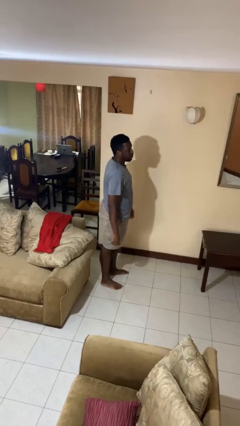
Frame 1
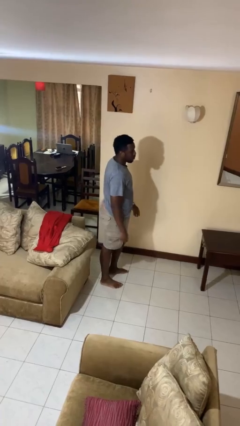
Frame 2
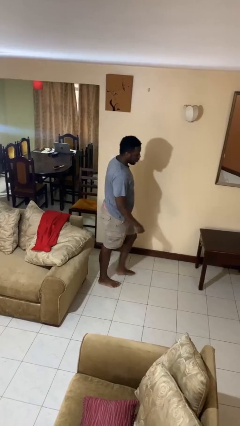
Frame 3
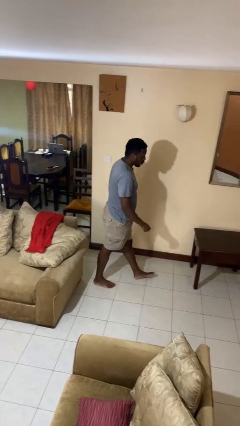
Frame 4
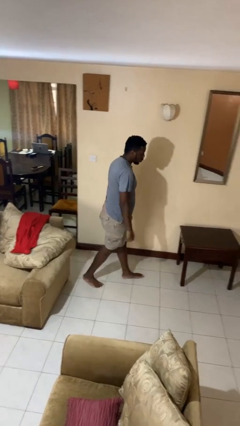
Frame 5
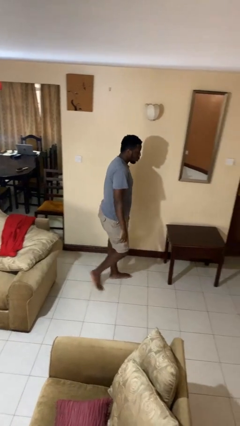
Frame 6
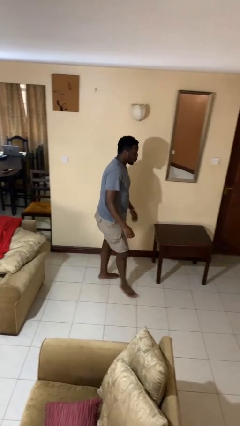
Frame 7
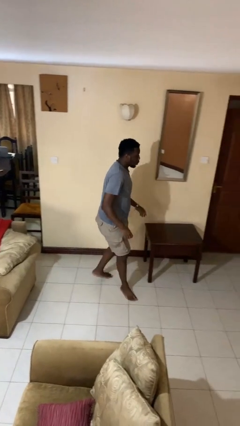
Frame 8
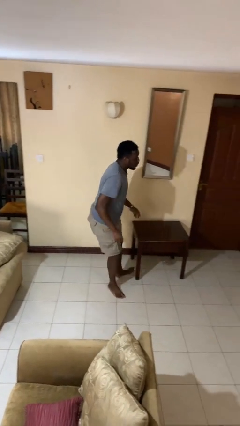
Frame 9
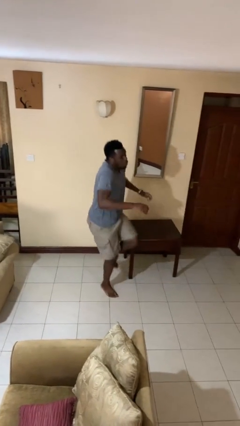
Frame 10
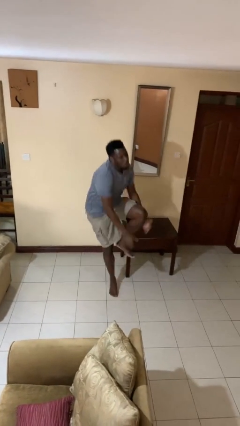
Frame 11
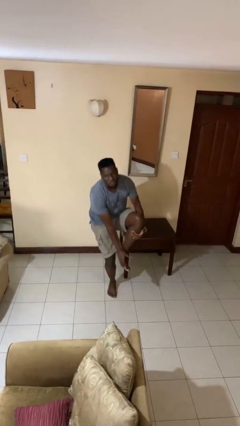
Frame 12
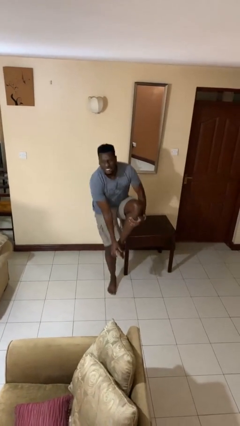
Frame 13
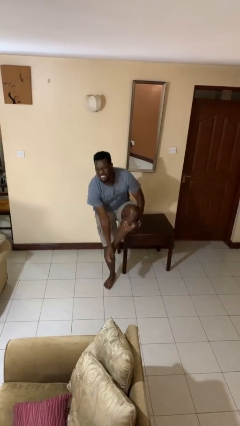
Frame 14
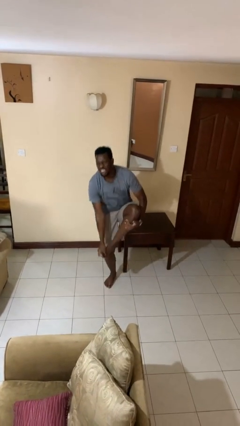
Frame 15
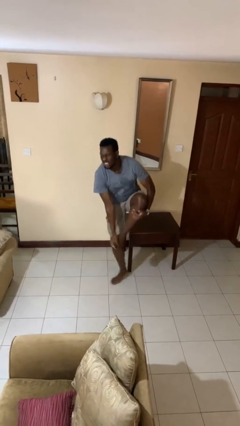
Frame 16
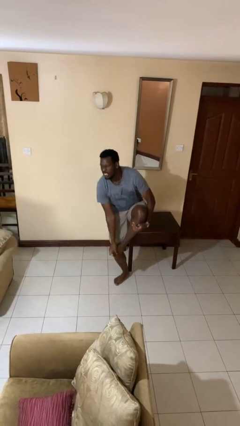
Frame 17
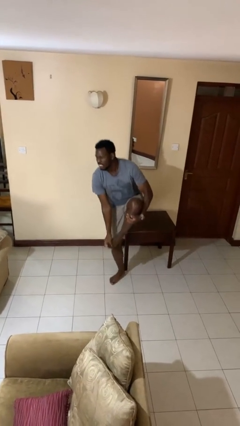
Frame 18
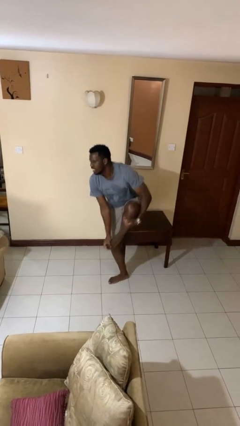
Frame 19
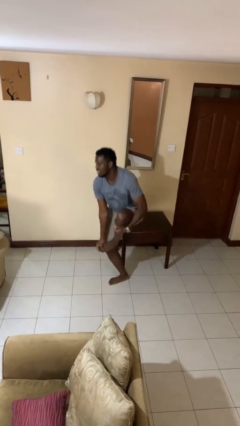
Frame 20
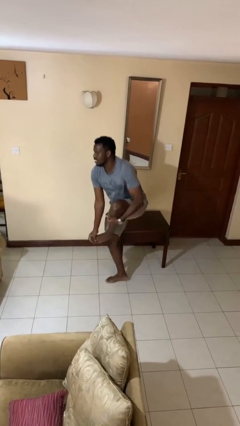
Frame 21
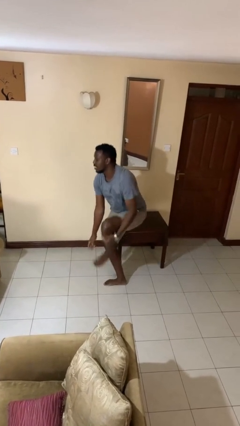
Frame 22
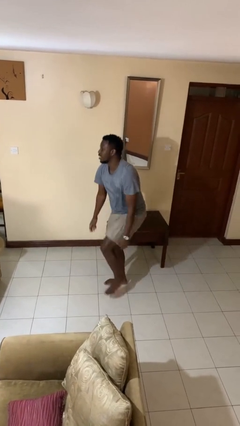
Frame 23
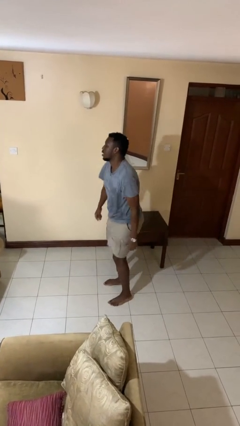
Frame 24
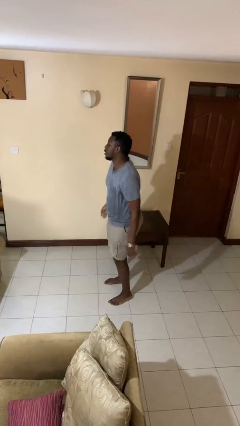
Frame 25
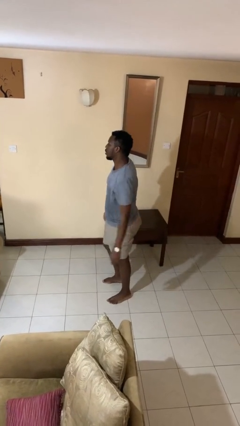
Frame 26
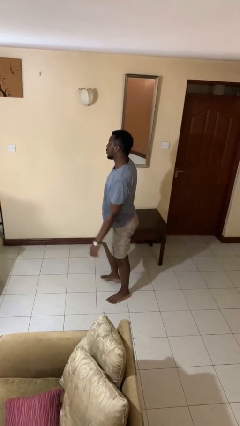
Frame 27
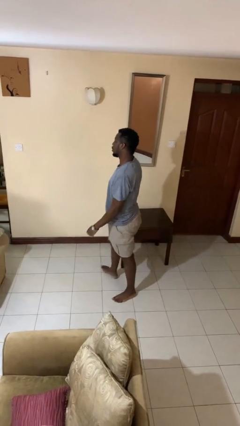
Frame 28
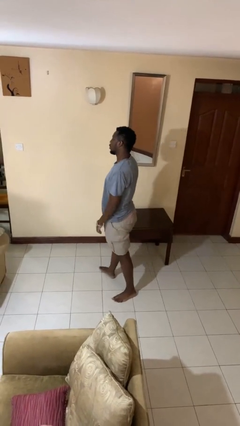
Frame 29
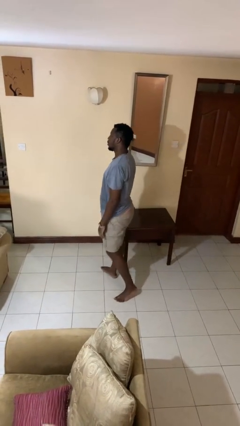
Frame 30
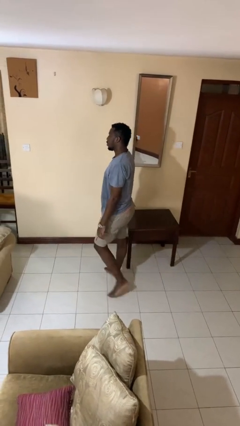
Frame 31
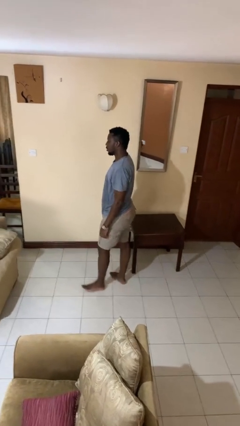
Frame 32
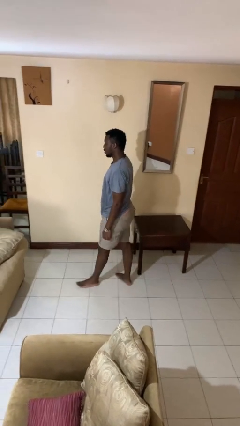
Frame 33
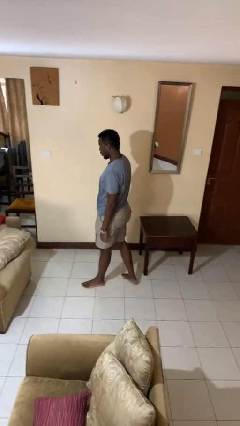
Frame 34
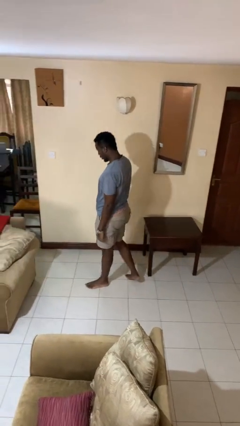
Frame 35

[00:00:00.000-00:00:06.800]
person stubs toe

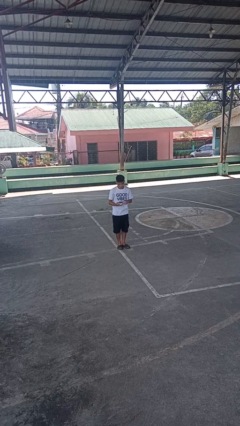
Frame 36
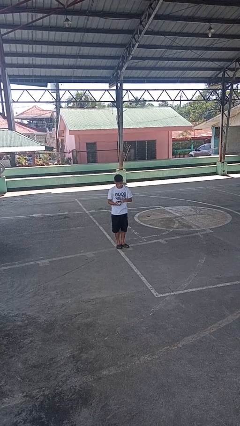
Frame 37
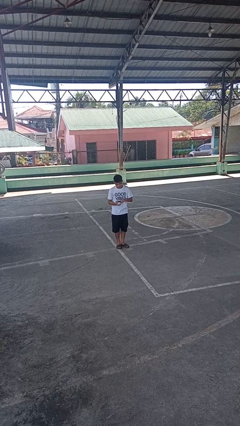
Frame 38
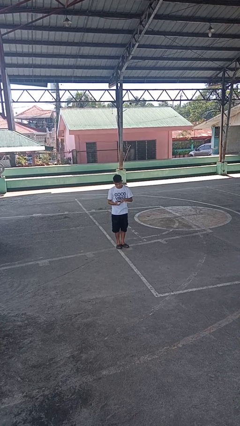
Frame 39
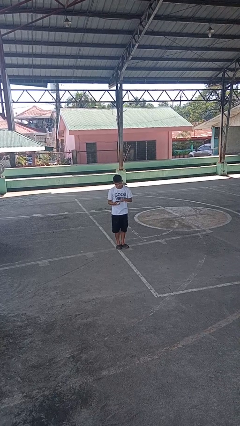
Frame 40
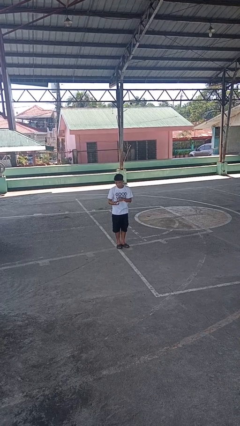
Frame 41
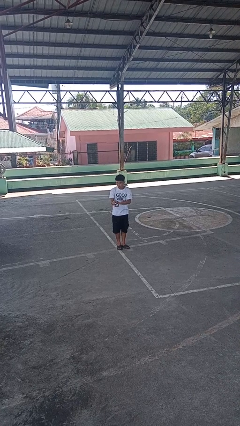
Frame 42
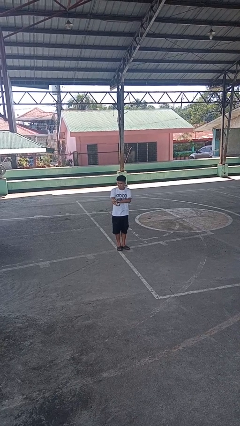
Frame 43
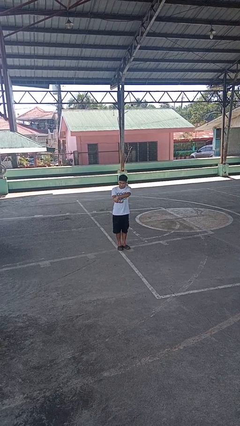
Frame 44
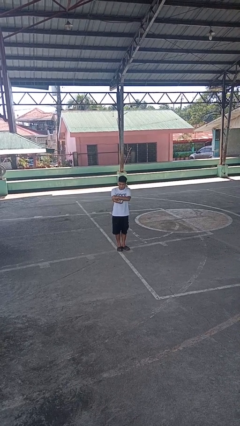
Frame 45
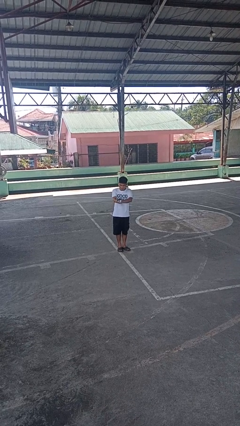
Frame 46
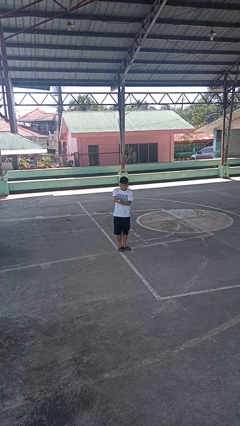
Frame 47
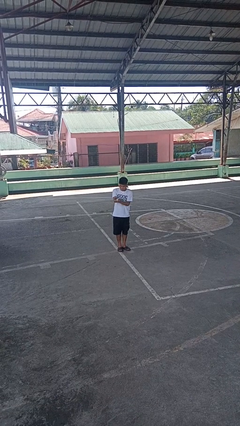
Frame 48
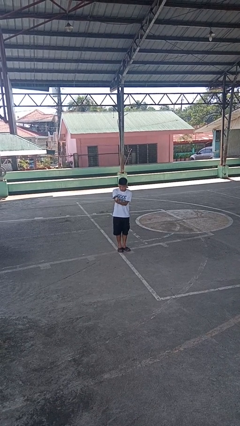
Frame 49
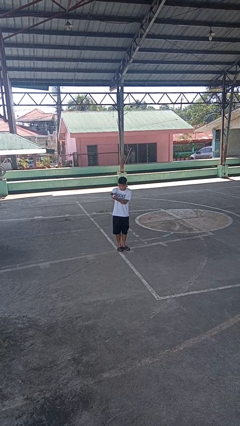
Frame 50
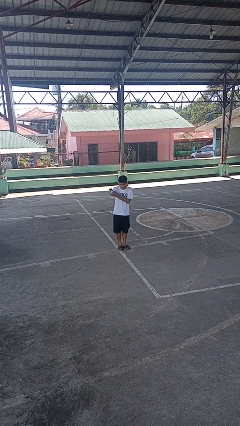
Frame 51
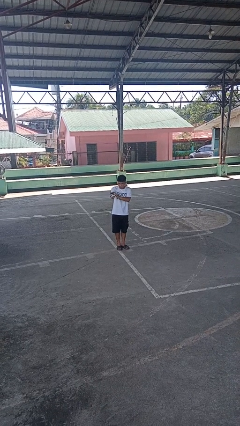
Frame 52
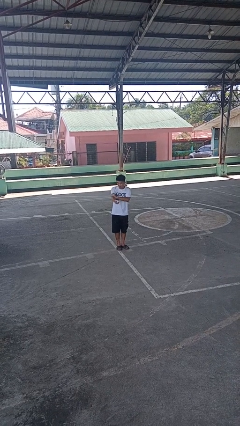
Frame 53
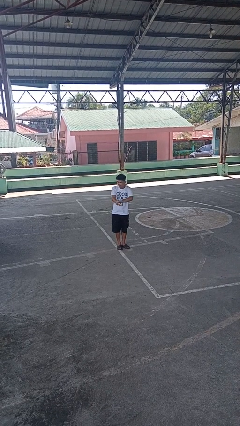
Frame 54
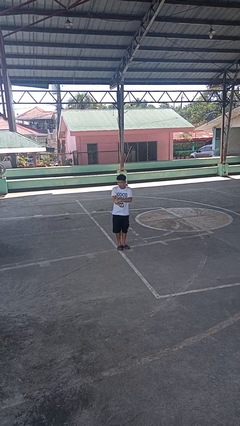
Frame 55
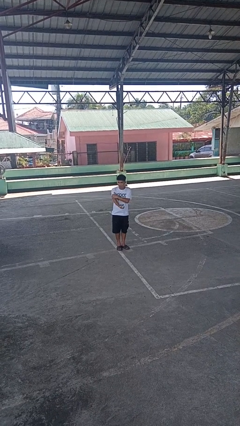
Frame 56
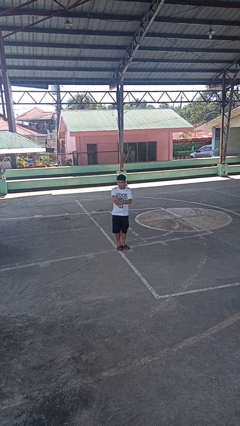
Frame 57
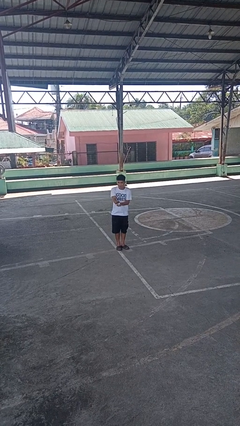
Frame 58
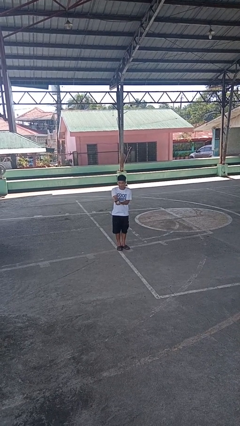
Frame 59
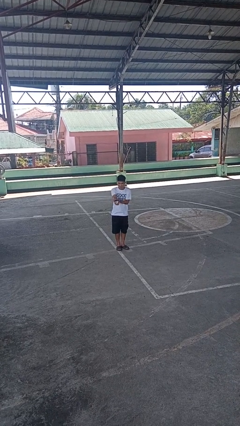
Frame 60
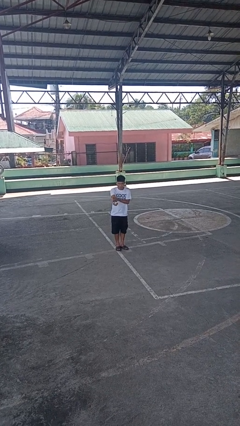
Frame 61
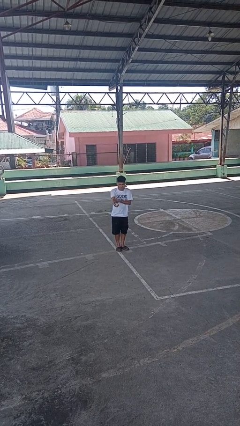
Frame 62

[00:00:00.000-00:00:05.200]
person applies sunscreen

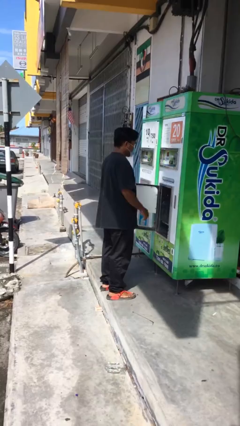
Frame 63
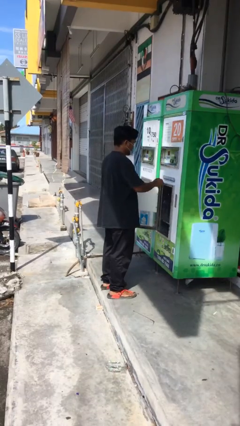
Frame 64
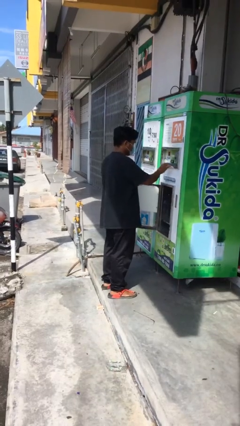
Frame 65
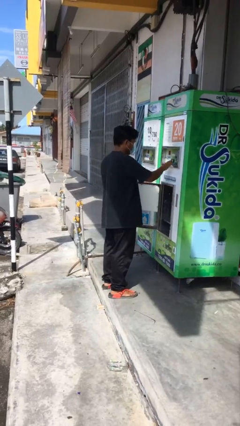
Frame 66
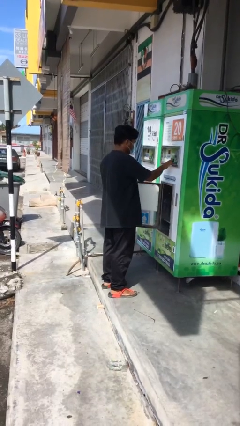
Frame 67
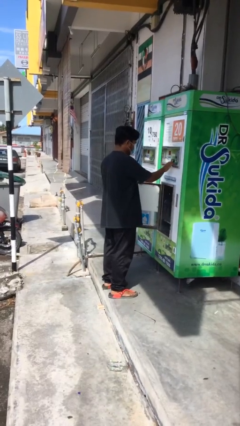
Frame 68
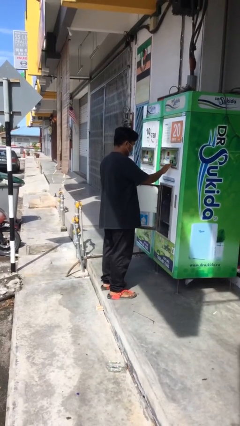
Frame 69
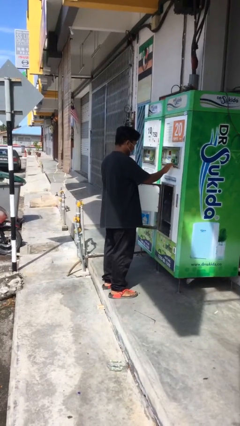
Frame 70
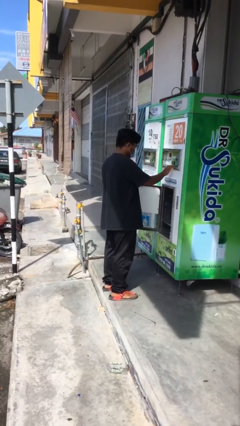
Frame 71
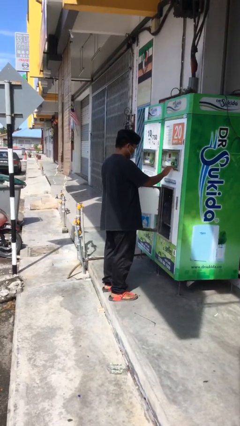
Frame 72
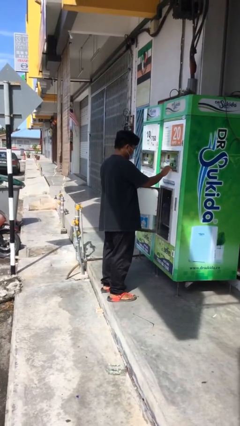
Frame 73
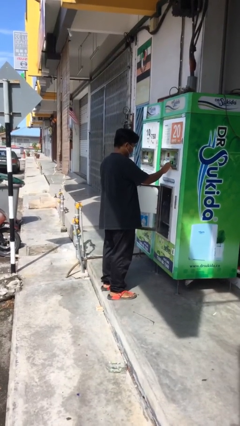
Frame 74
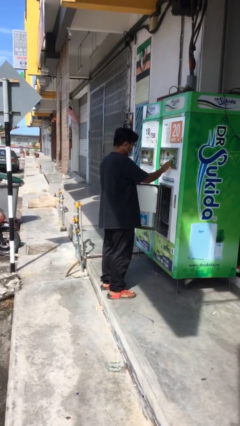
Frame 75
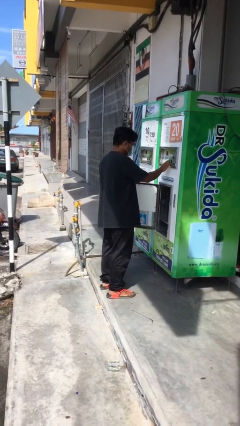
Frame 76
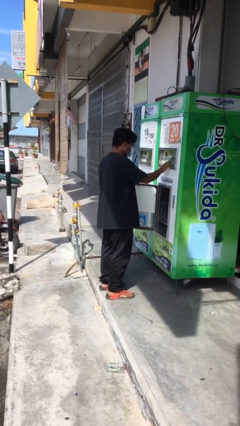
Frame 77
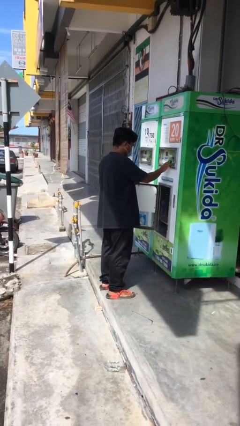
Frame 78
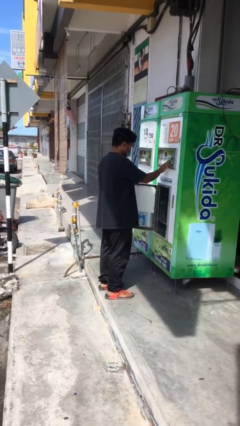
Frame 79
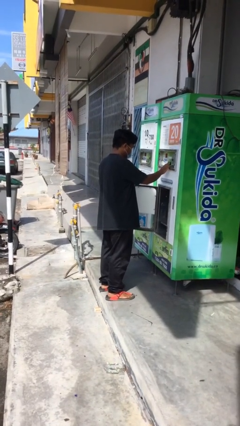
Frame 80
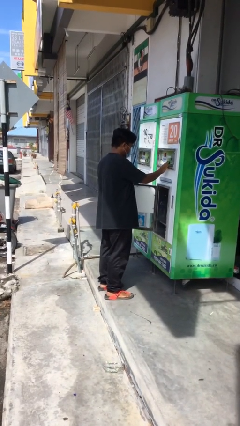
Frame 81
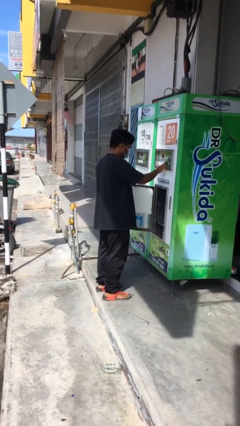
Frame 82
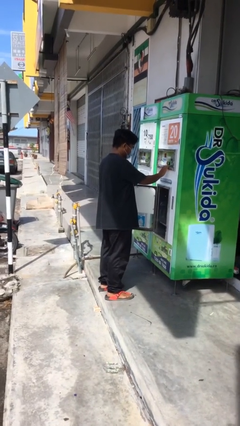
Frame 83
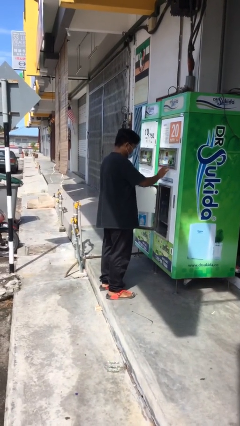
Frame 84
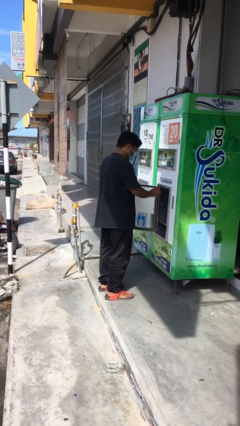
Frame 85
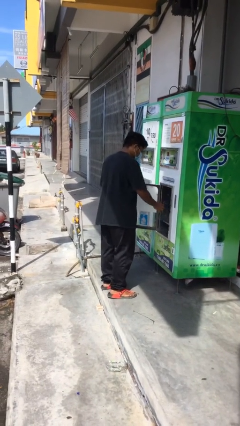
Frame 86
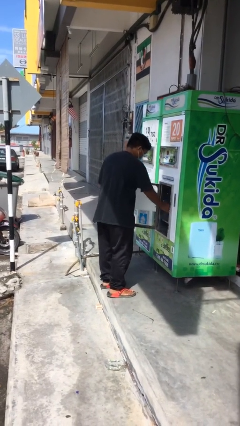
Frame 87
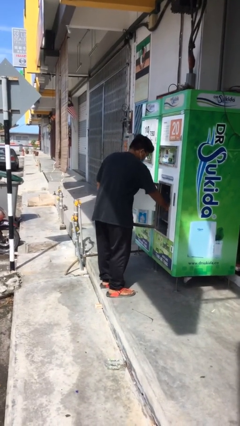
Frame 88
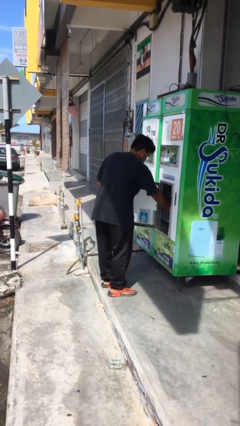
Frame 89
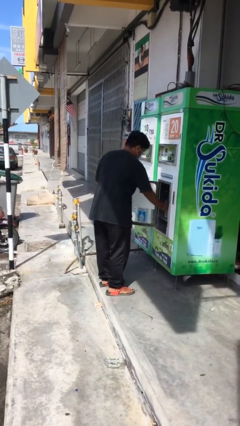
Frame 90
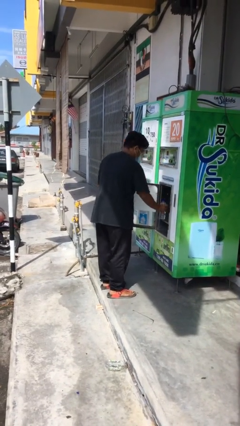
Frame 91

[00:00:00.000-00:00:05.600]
person purchases from machine
